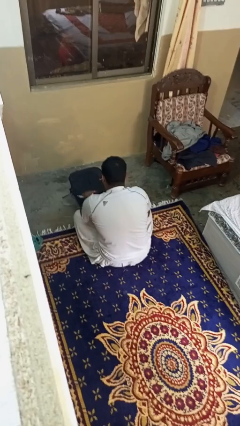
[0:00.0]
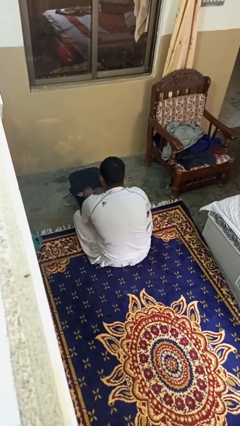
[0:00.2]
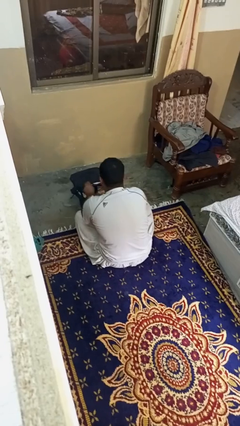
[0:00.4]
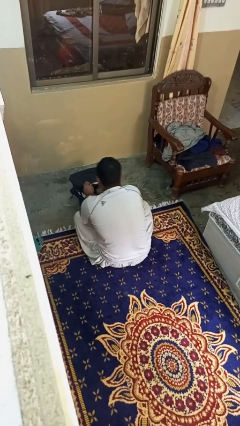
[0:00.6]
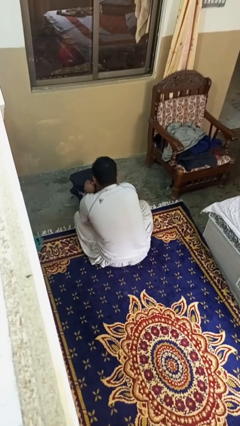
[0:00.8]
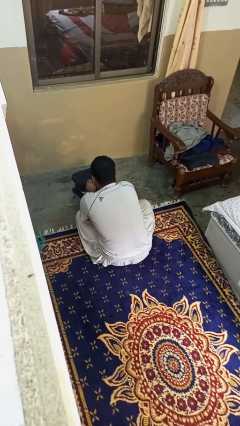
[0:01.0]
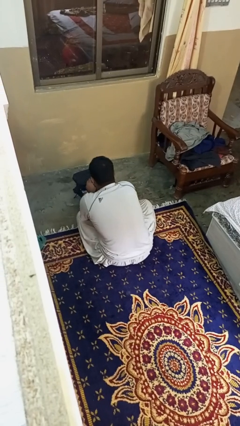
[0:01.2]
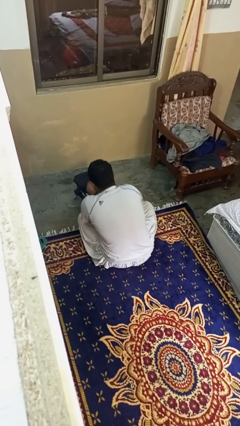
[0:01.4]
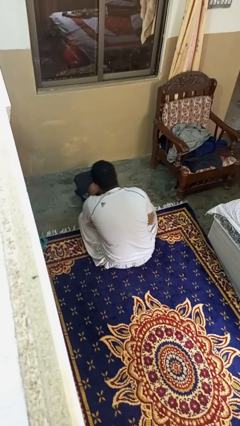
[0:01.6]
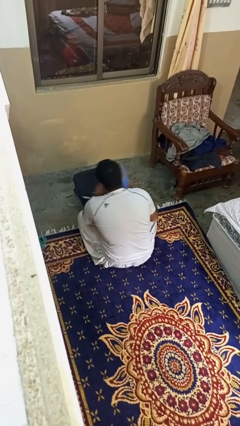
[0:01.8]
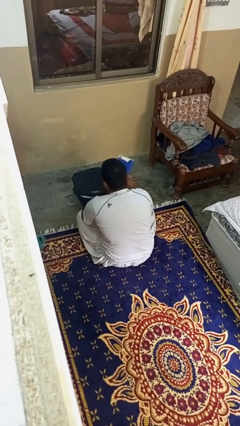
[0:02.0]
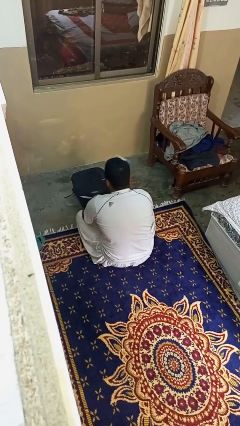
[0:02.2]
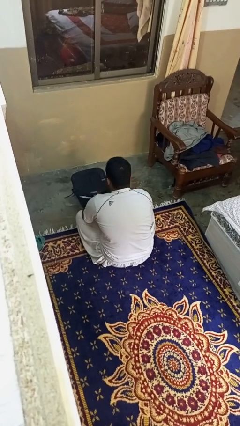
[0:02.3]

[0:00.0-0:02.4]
person takes object from bag

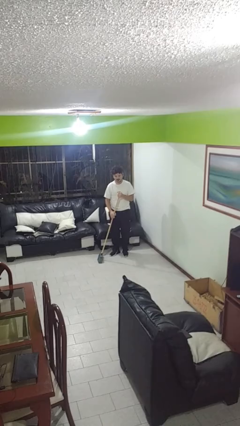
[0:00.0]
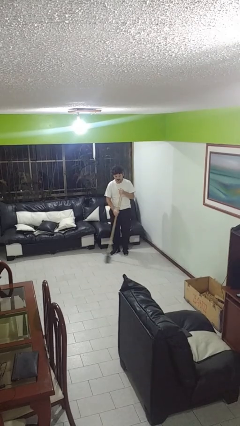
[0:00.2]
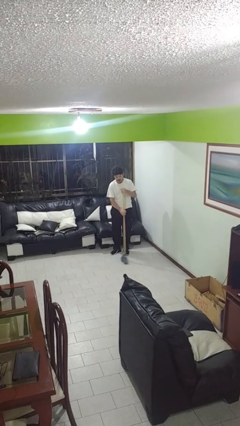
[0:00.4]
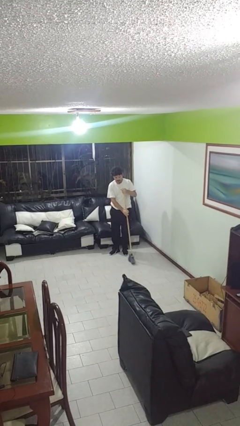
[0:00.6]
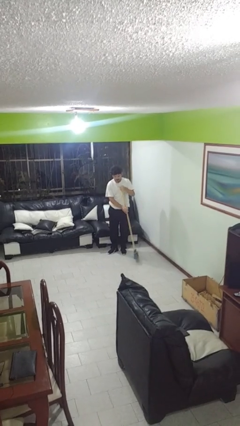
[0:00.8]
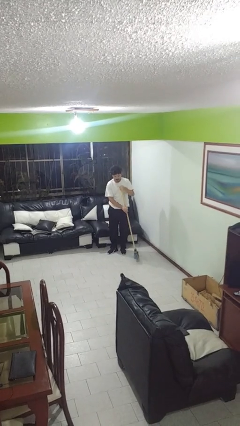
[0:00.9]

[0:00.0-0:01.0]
person sweeps floor

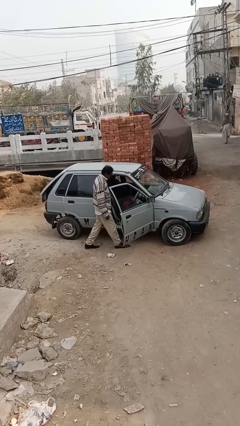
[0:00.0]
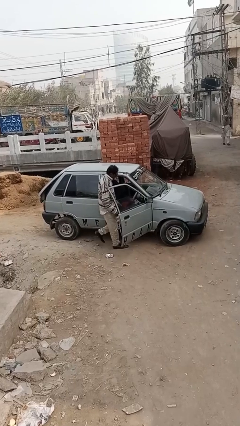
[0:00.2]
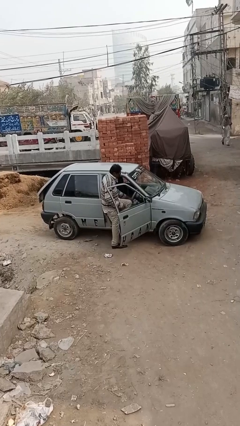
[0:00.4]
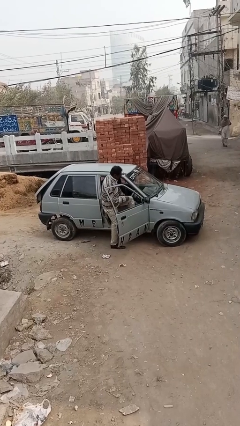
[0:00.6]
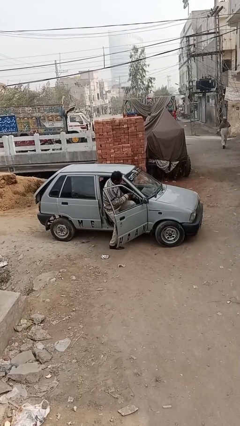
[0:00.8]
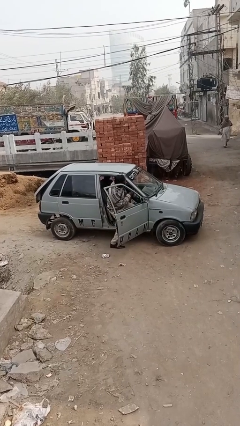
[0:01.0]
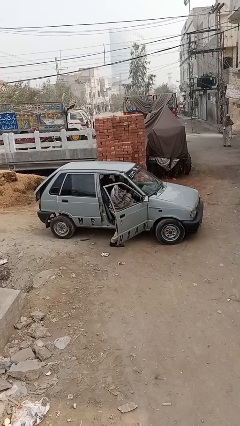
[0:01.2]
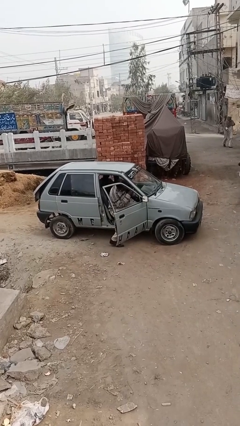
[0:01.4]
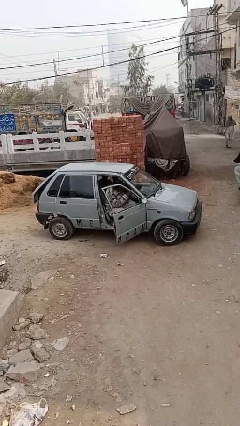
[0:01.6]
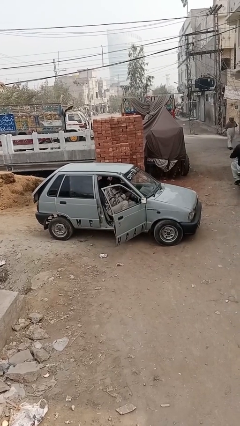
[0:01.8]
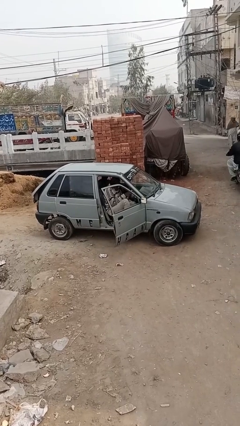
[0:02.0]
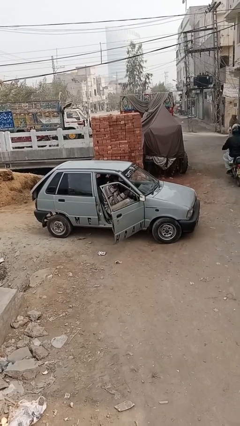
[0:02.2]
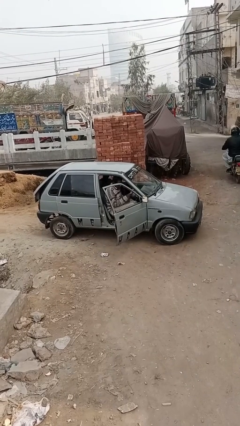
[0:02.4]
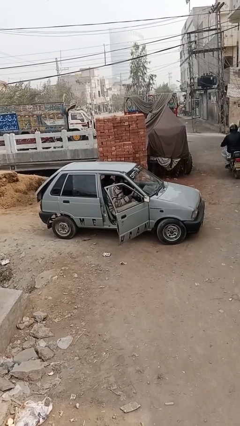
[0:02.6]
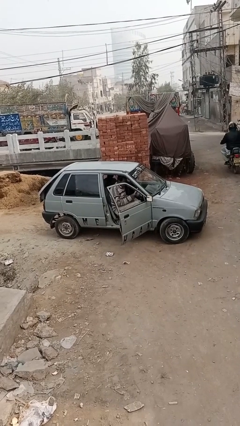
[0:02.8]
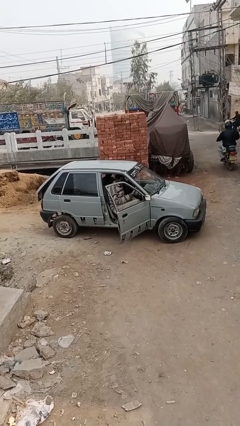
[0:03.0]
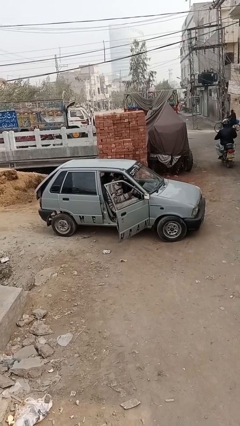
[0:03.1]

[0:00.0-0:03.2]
person enters car

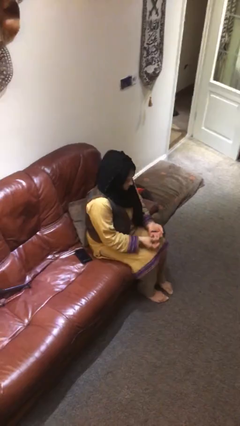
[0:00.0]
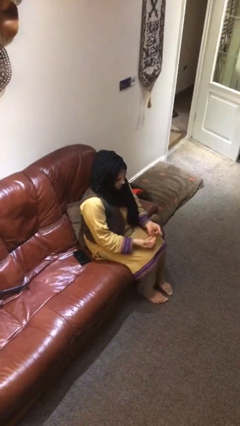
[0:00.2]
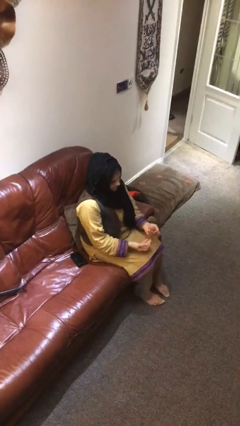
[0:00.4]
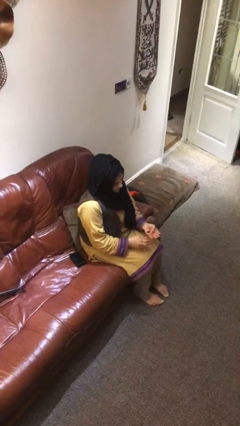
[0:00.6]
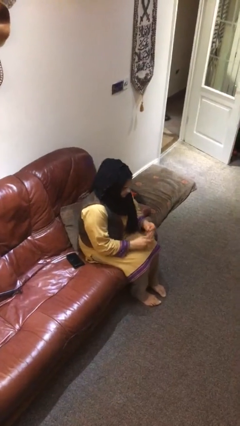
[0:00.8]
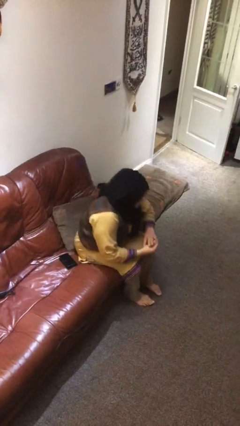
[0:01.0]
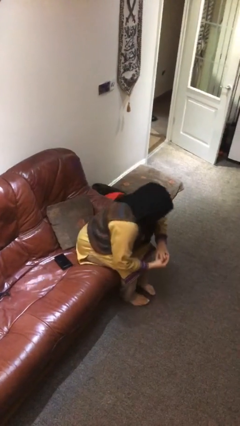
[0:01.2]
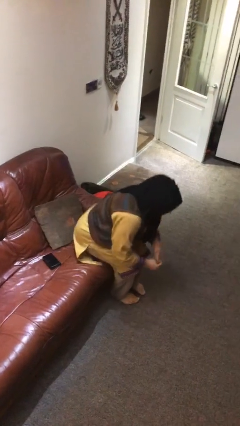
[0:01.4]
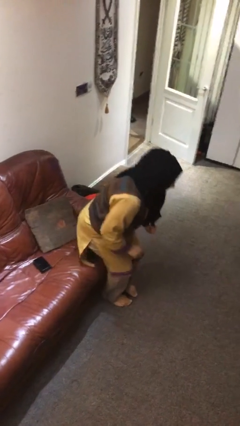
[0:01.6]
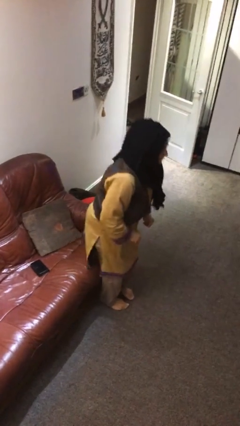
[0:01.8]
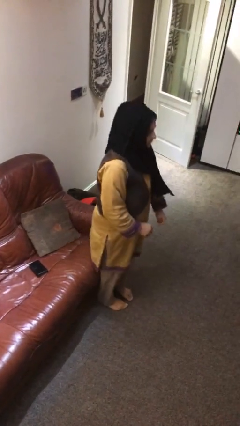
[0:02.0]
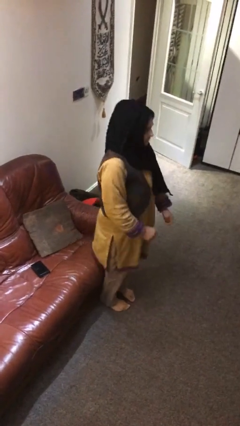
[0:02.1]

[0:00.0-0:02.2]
person stands up

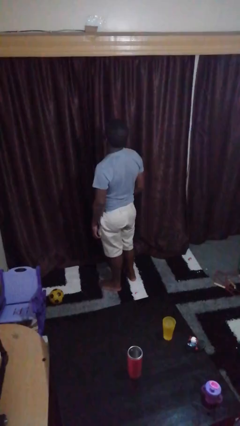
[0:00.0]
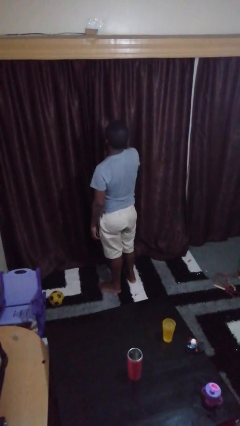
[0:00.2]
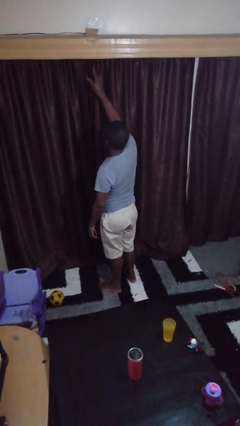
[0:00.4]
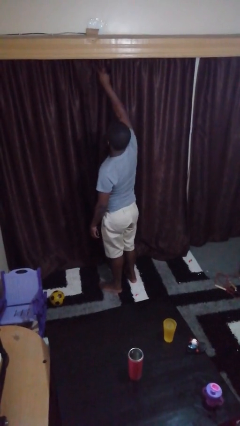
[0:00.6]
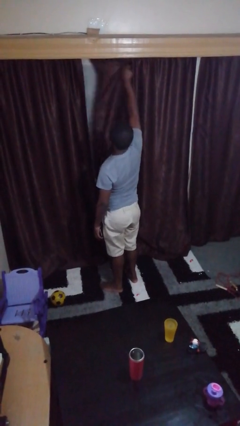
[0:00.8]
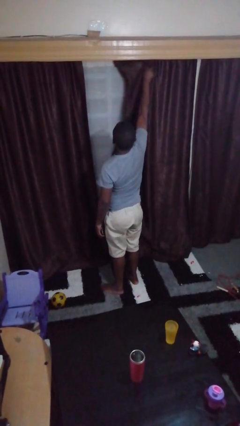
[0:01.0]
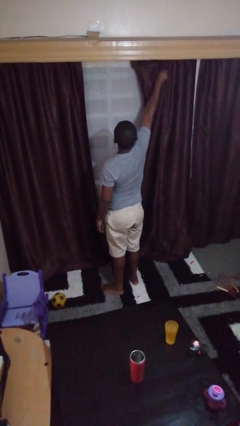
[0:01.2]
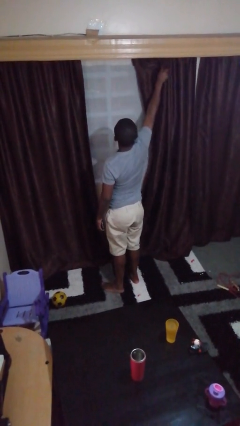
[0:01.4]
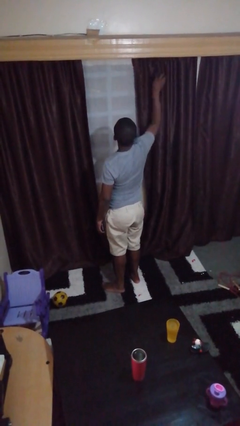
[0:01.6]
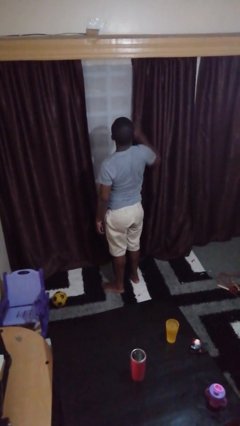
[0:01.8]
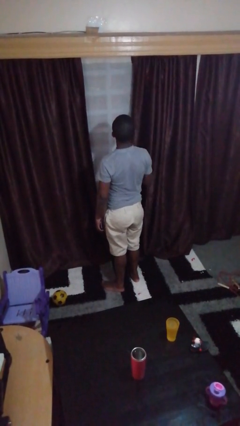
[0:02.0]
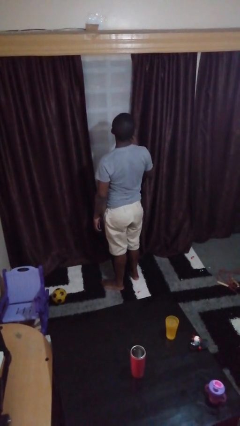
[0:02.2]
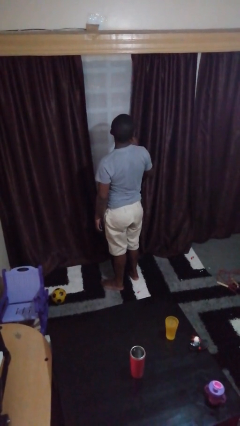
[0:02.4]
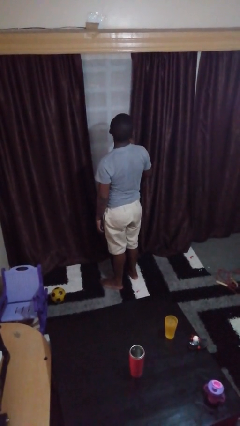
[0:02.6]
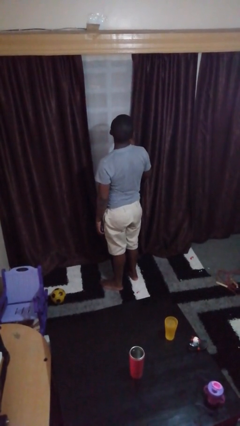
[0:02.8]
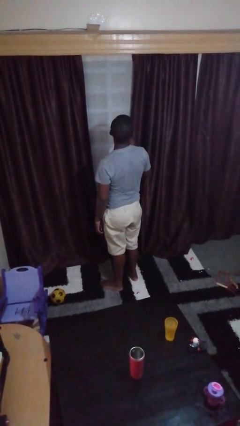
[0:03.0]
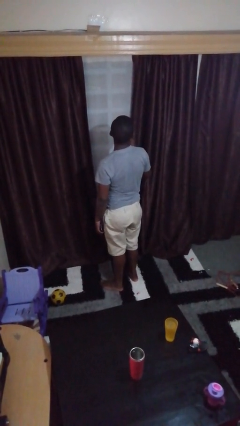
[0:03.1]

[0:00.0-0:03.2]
person opens curtains

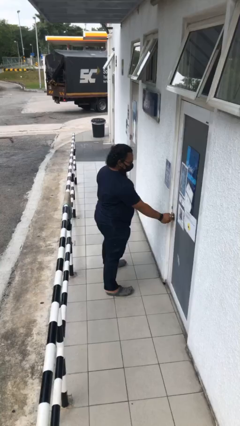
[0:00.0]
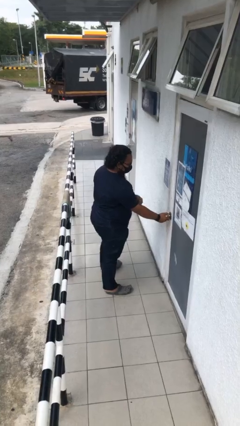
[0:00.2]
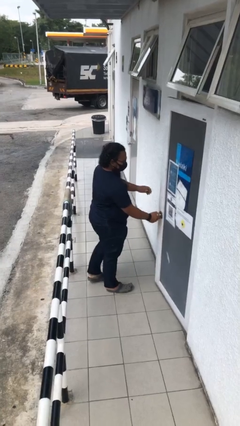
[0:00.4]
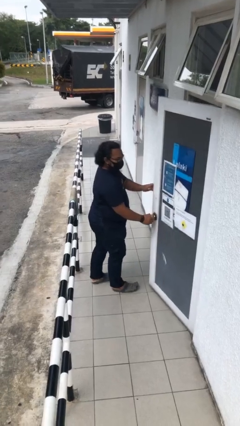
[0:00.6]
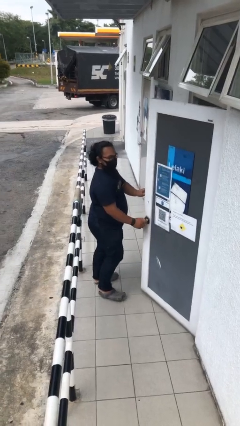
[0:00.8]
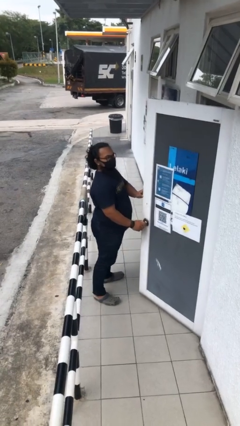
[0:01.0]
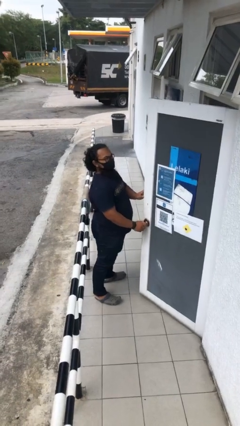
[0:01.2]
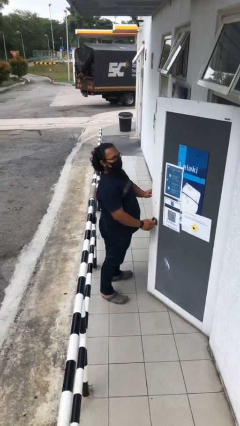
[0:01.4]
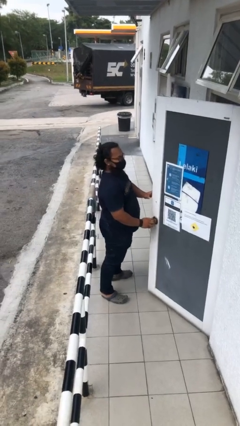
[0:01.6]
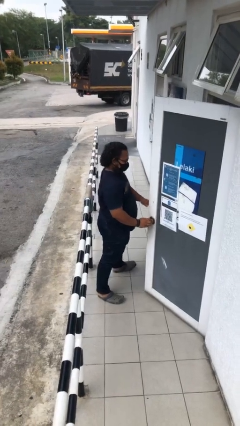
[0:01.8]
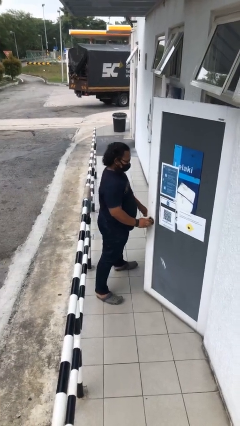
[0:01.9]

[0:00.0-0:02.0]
person opens facility door

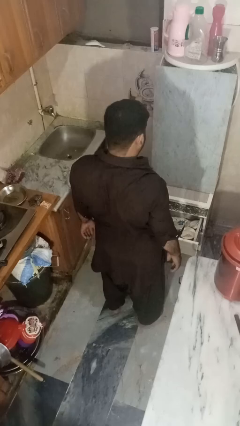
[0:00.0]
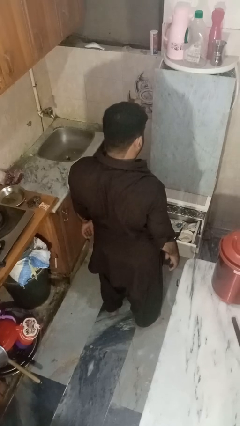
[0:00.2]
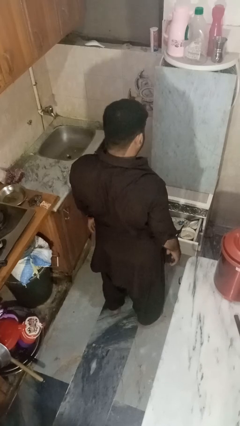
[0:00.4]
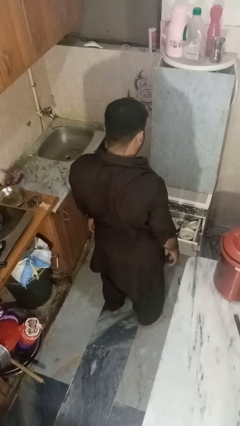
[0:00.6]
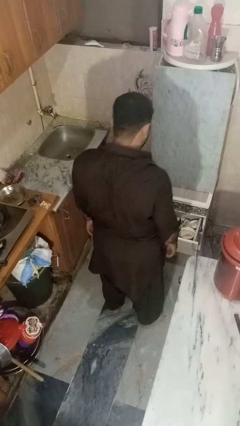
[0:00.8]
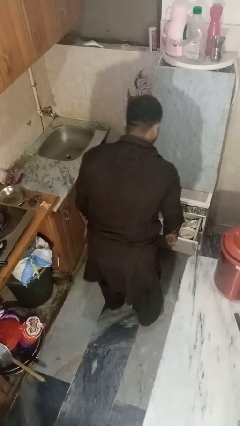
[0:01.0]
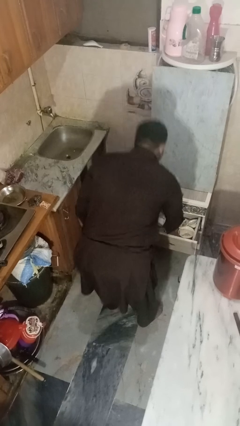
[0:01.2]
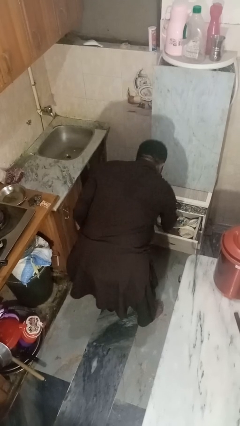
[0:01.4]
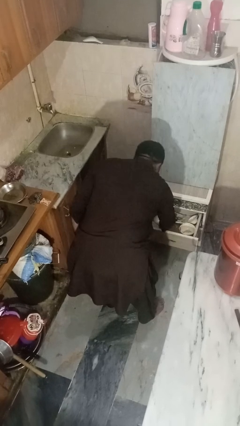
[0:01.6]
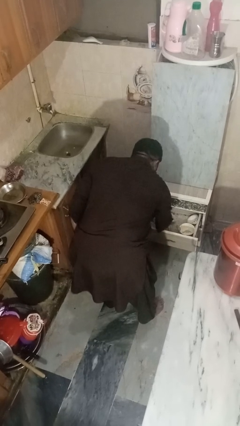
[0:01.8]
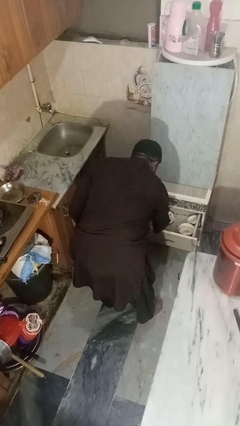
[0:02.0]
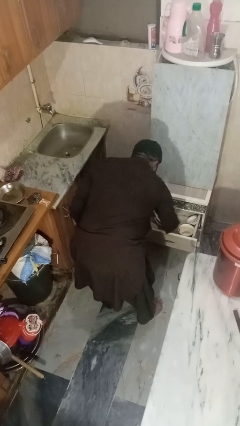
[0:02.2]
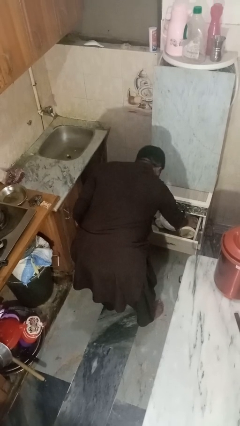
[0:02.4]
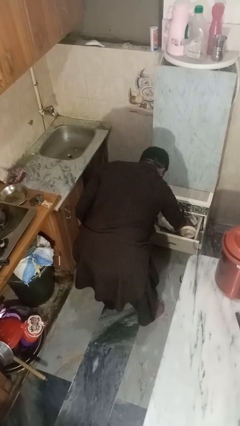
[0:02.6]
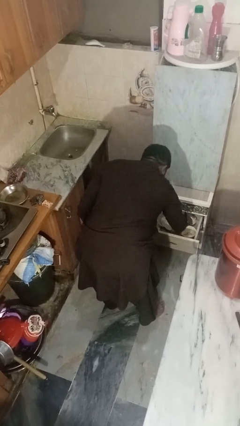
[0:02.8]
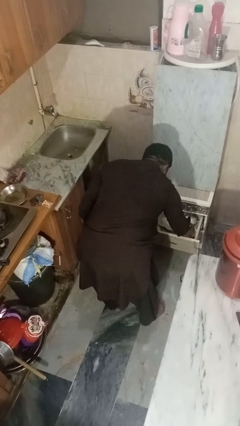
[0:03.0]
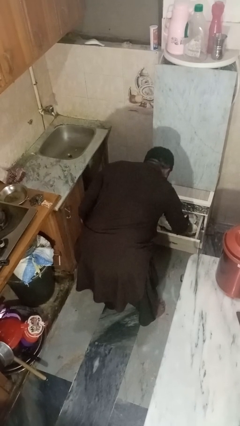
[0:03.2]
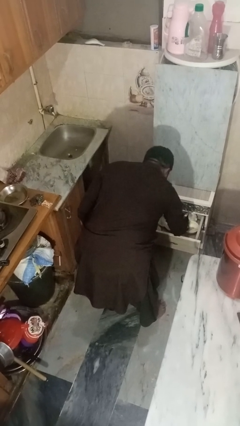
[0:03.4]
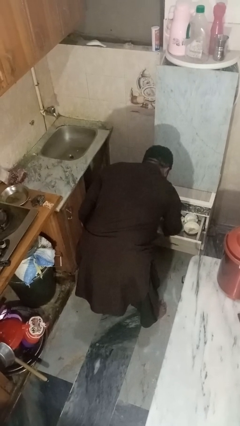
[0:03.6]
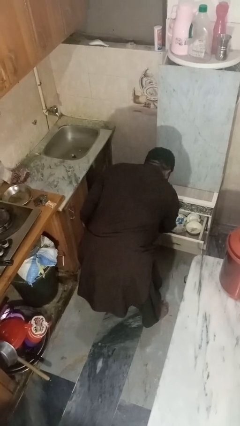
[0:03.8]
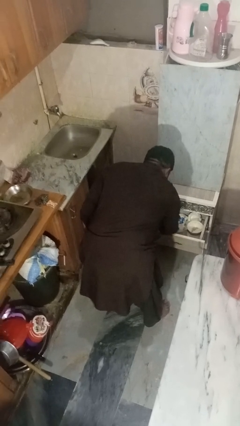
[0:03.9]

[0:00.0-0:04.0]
person searches in kitchen drawer
